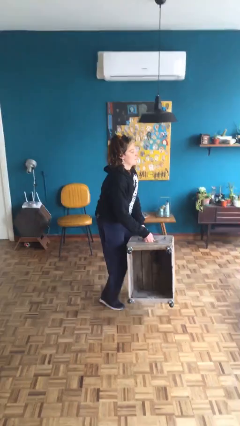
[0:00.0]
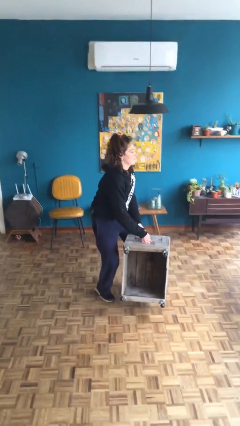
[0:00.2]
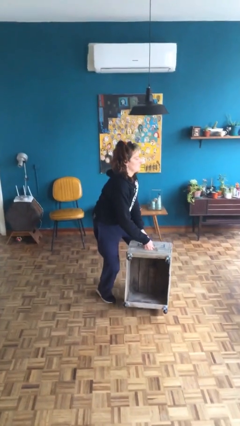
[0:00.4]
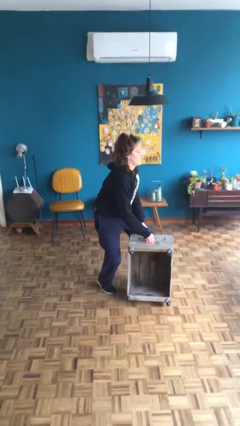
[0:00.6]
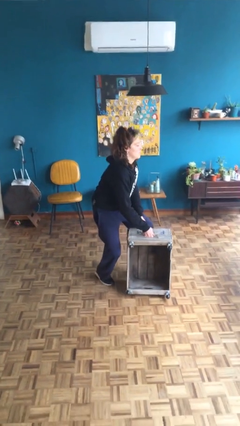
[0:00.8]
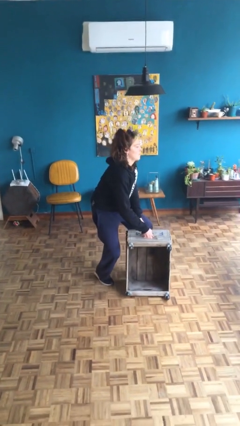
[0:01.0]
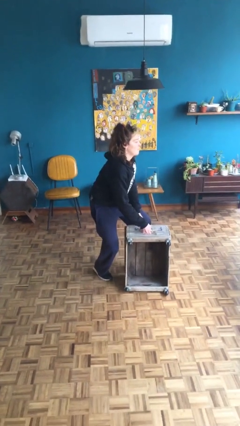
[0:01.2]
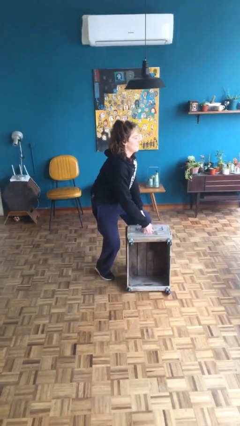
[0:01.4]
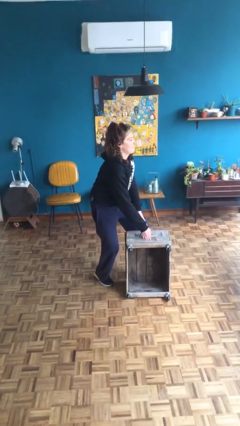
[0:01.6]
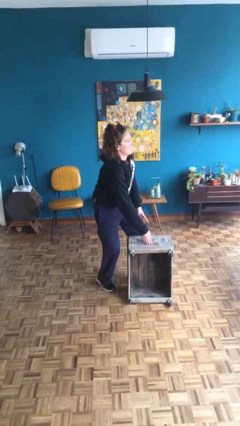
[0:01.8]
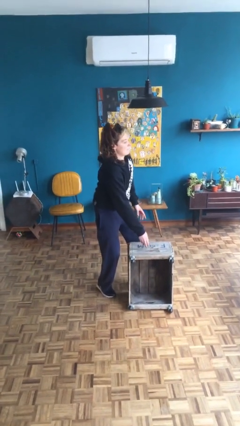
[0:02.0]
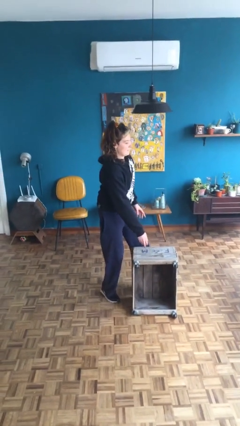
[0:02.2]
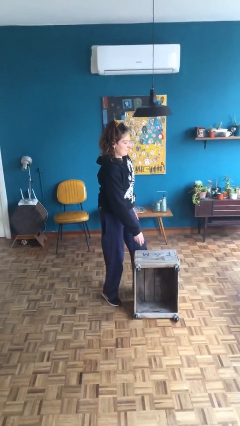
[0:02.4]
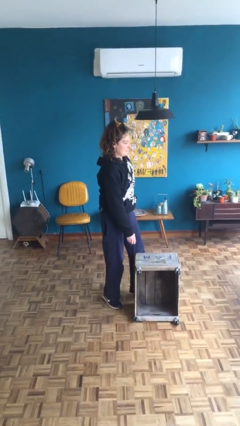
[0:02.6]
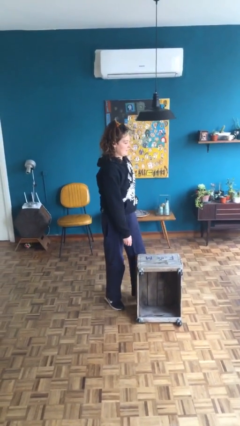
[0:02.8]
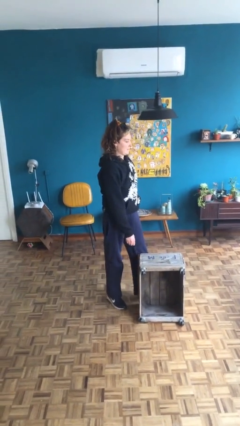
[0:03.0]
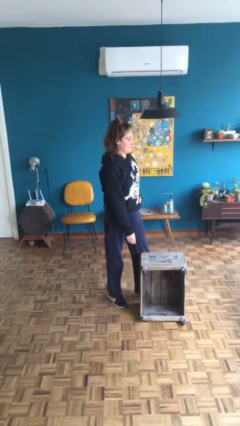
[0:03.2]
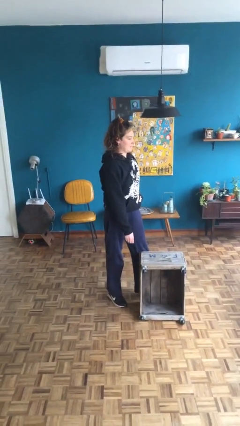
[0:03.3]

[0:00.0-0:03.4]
person puts down object on floor

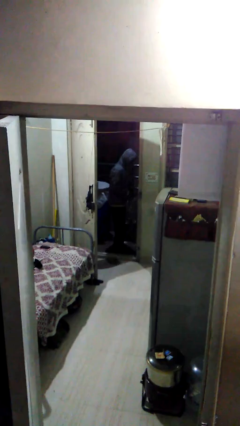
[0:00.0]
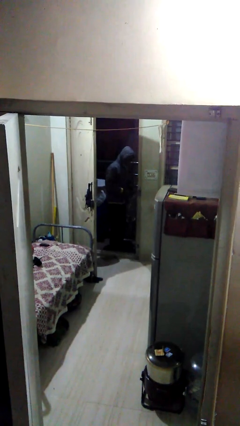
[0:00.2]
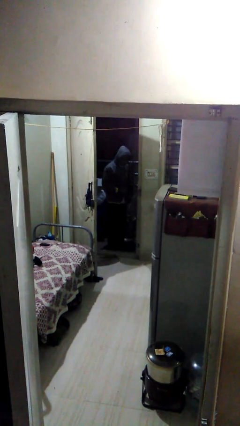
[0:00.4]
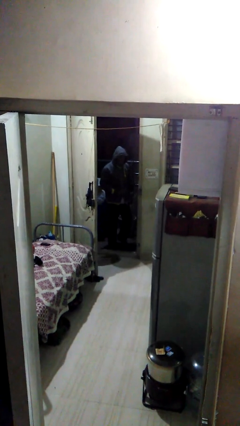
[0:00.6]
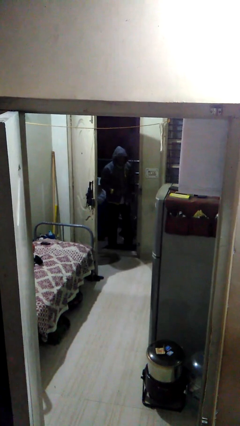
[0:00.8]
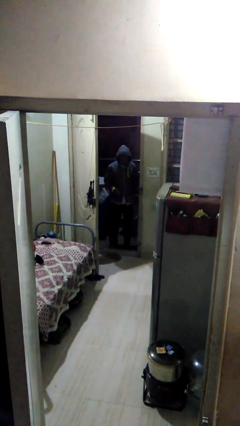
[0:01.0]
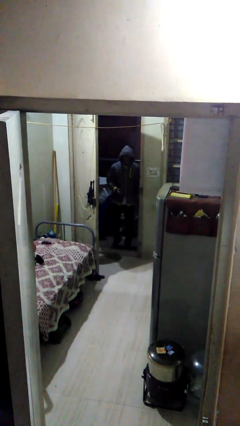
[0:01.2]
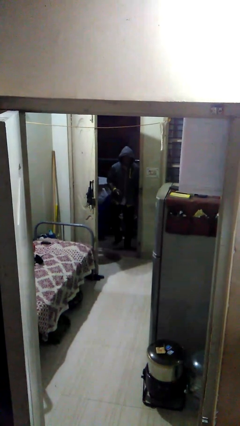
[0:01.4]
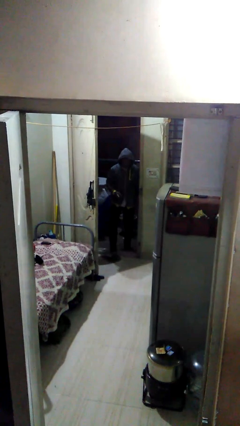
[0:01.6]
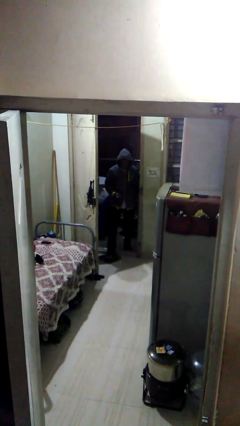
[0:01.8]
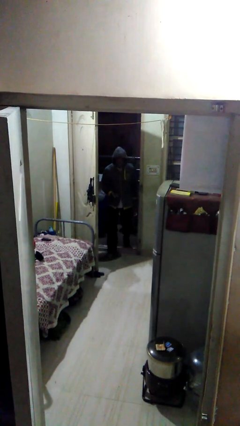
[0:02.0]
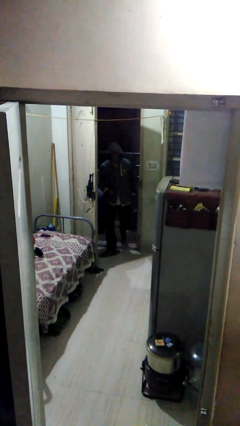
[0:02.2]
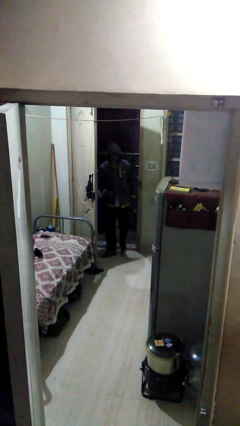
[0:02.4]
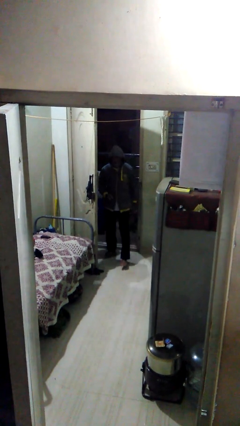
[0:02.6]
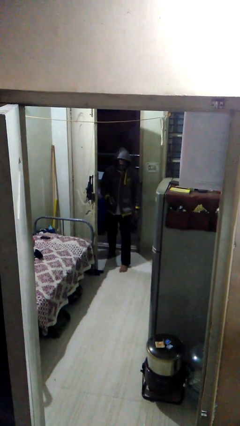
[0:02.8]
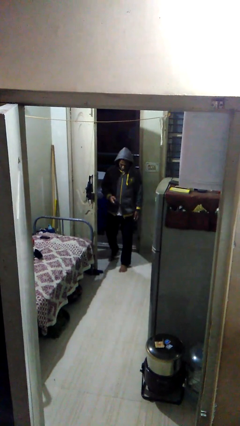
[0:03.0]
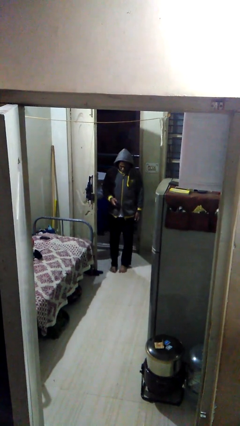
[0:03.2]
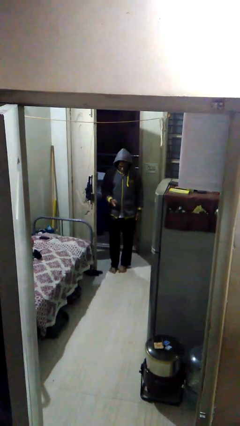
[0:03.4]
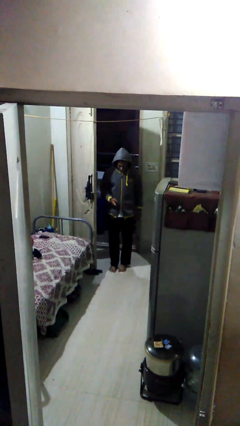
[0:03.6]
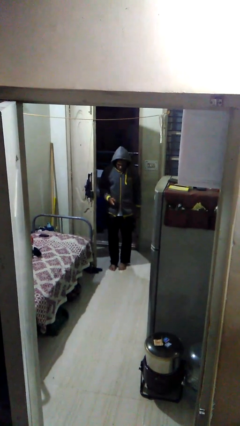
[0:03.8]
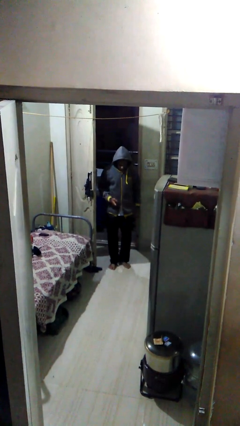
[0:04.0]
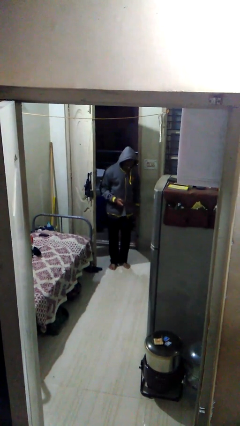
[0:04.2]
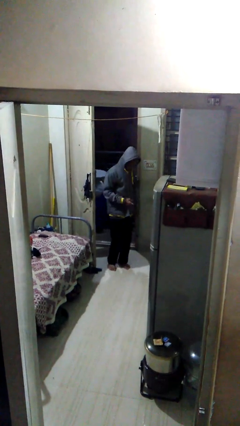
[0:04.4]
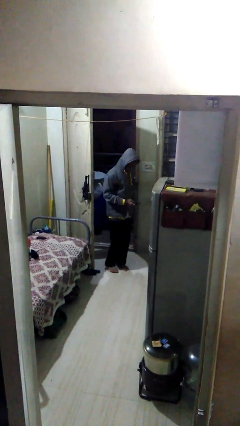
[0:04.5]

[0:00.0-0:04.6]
person enters scene through structure

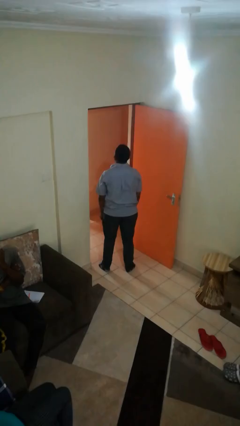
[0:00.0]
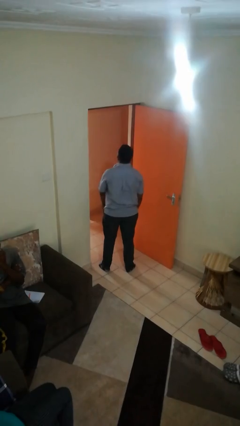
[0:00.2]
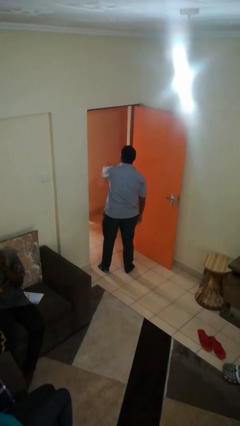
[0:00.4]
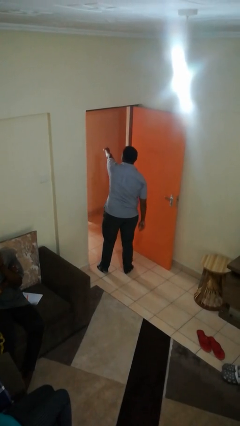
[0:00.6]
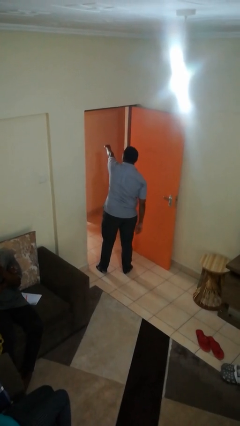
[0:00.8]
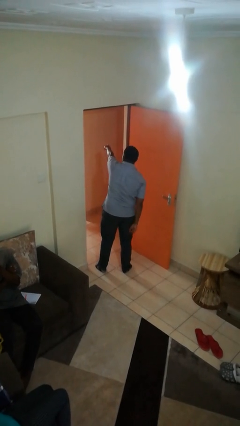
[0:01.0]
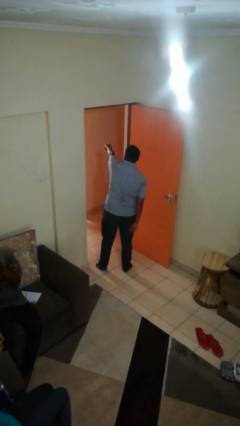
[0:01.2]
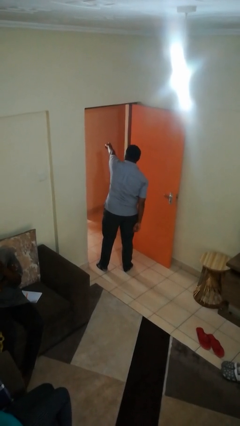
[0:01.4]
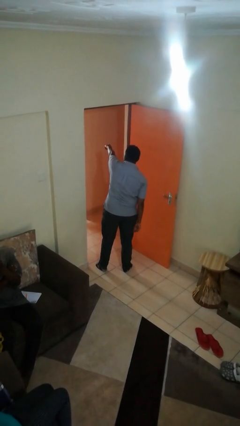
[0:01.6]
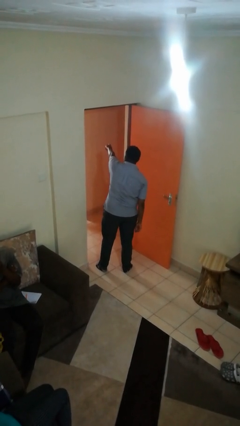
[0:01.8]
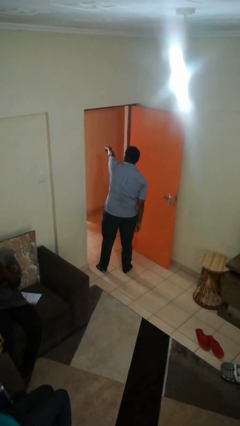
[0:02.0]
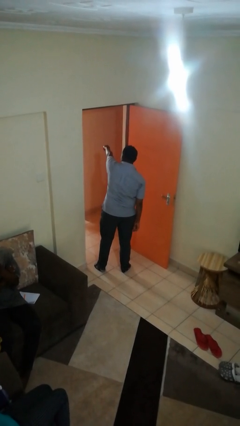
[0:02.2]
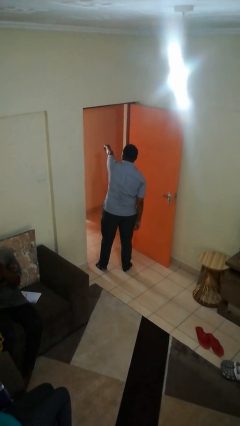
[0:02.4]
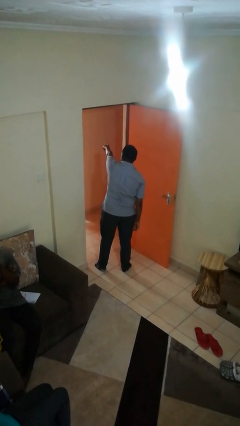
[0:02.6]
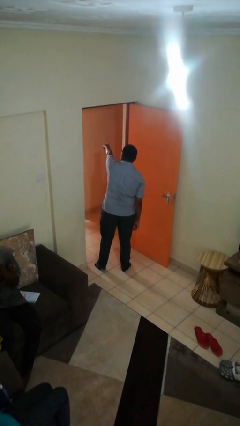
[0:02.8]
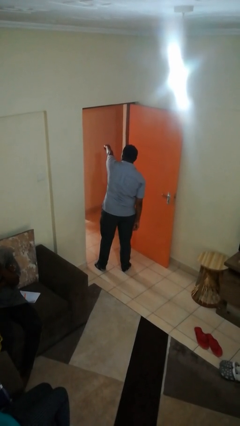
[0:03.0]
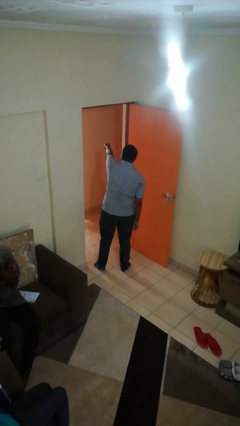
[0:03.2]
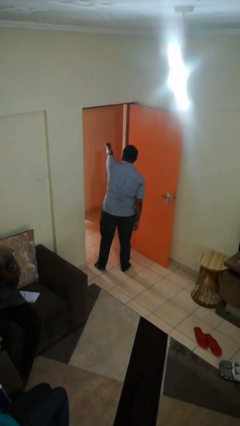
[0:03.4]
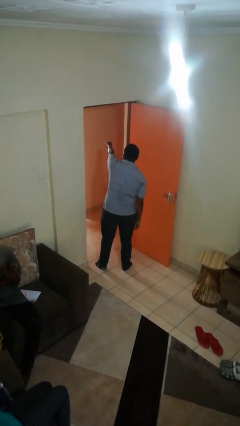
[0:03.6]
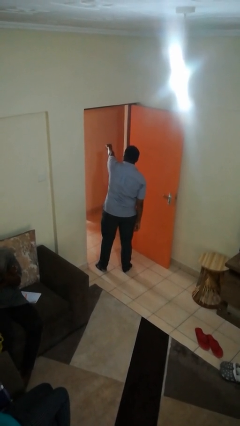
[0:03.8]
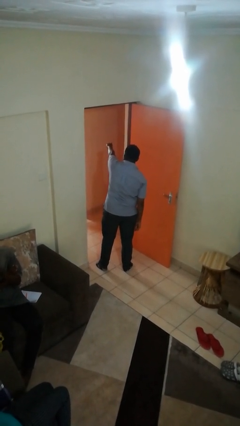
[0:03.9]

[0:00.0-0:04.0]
person points at person

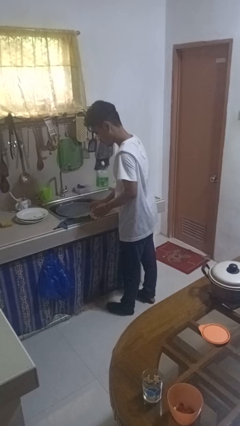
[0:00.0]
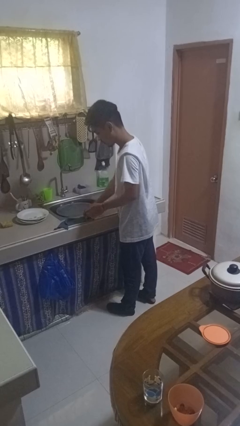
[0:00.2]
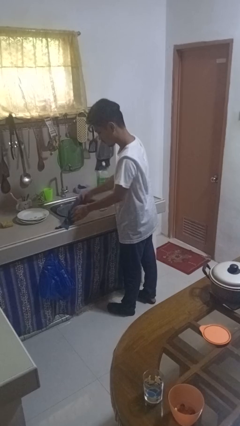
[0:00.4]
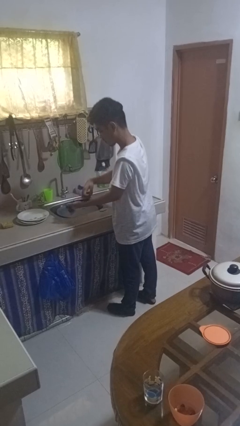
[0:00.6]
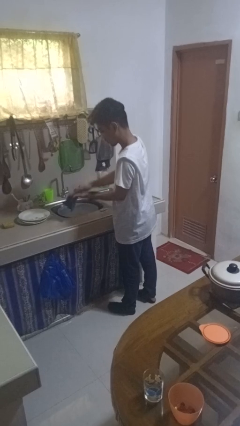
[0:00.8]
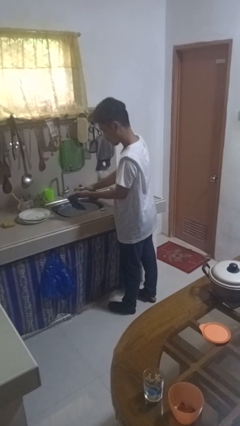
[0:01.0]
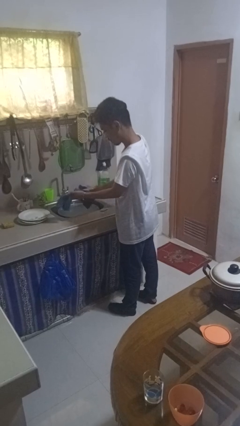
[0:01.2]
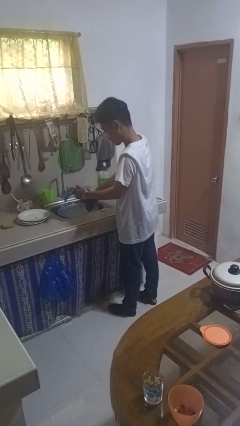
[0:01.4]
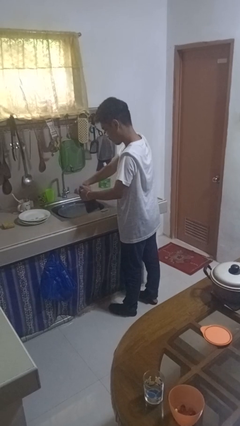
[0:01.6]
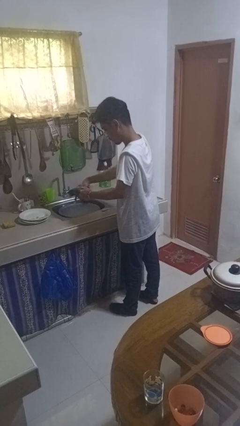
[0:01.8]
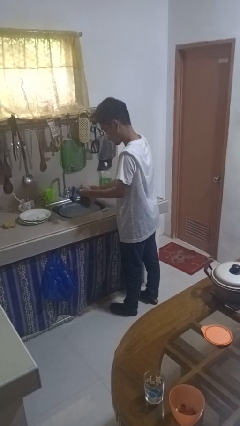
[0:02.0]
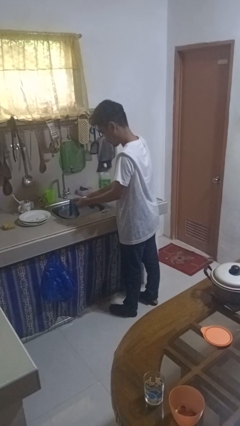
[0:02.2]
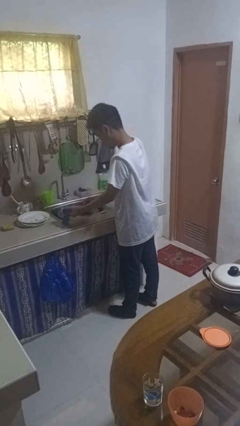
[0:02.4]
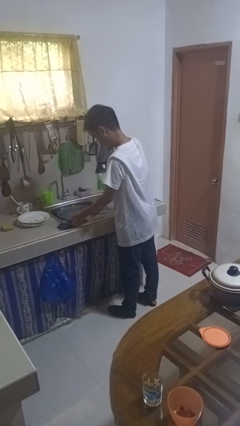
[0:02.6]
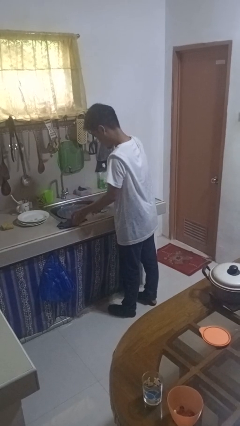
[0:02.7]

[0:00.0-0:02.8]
person dries hands with towel

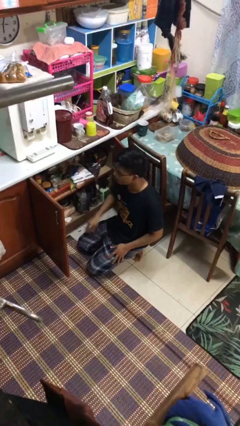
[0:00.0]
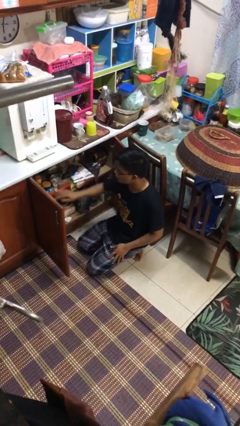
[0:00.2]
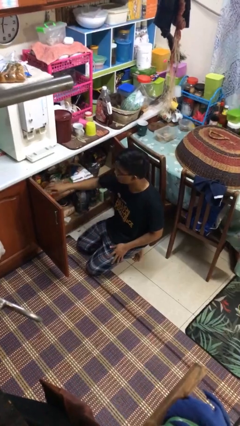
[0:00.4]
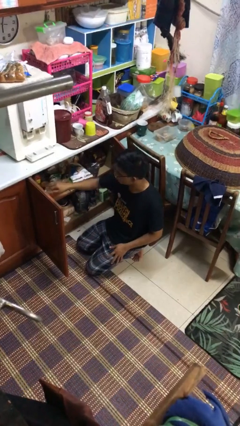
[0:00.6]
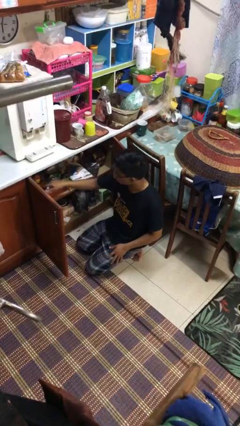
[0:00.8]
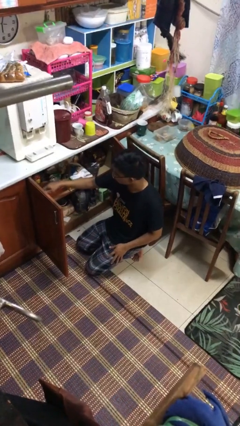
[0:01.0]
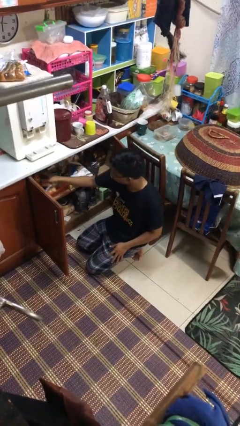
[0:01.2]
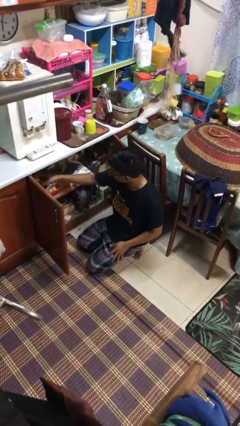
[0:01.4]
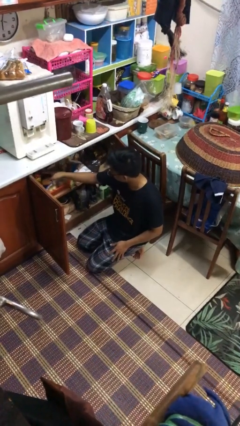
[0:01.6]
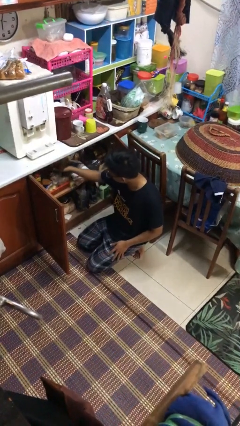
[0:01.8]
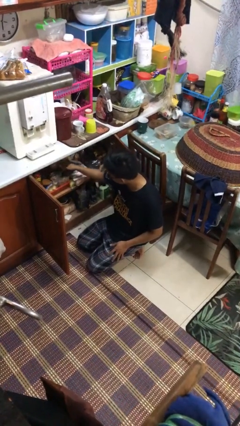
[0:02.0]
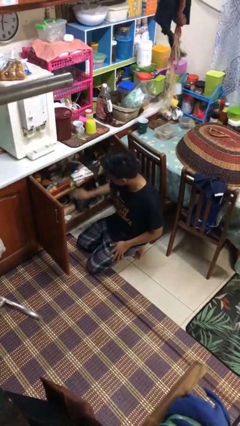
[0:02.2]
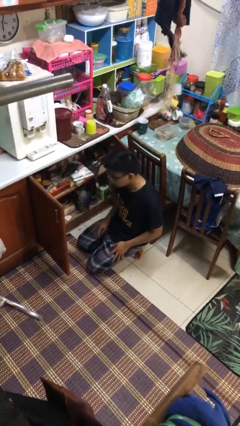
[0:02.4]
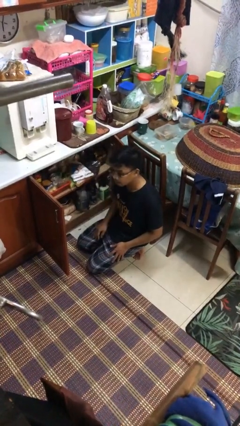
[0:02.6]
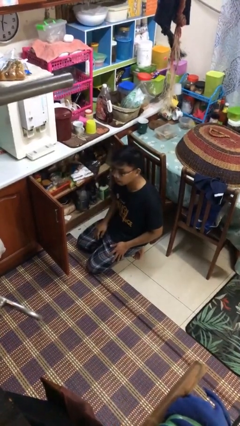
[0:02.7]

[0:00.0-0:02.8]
person searches in kitchen drawer
